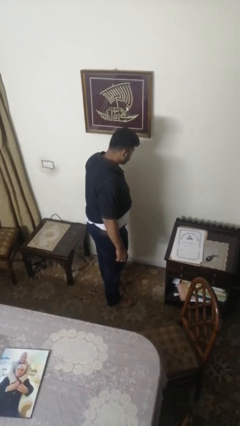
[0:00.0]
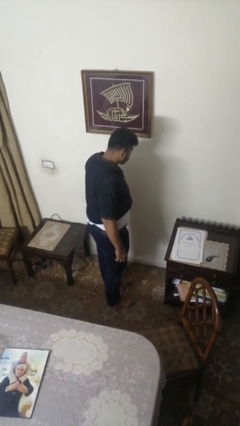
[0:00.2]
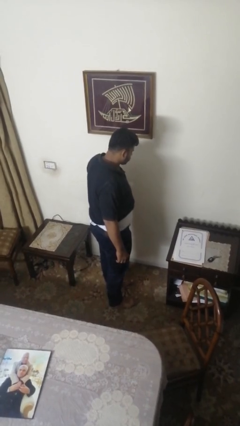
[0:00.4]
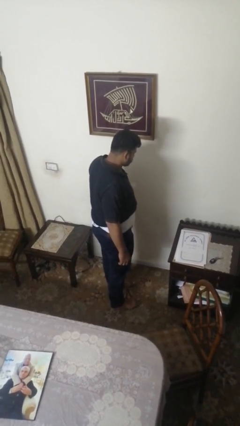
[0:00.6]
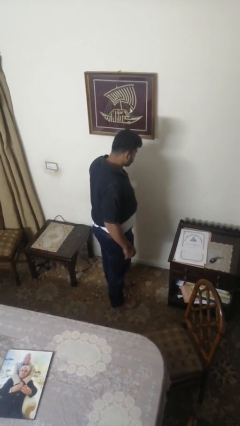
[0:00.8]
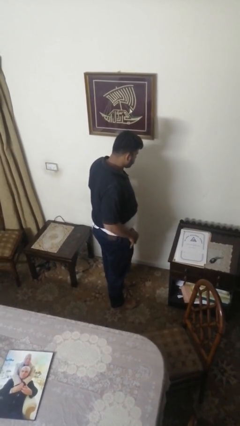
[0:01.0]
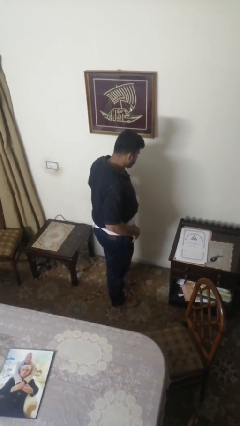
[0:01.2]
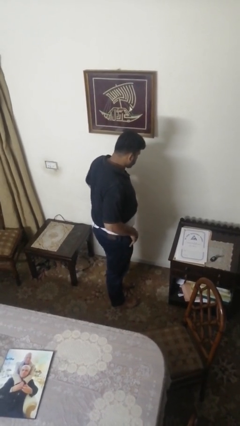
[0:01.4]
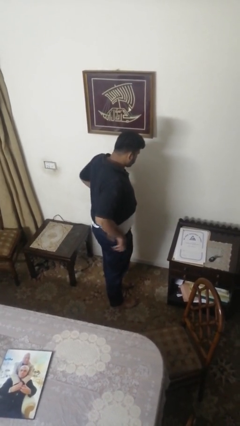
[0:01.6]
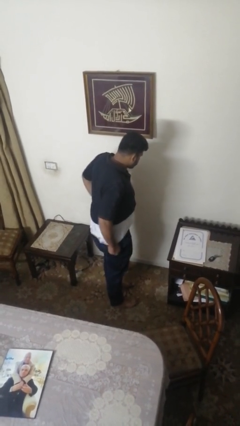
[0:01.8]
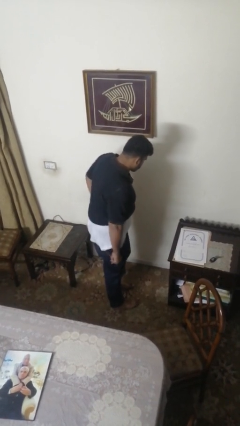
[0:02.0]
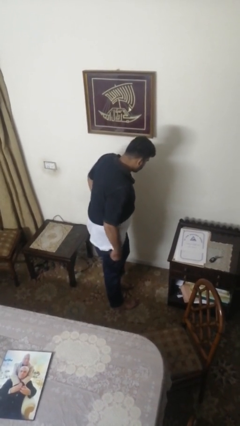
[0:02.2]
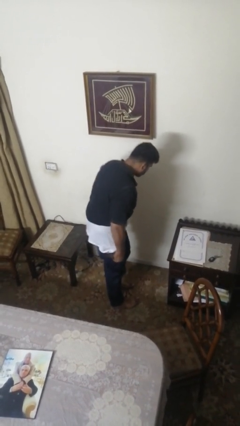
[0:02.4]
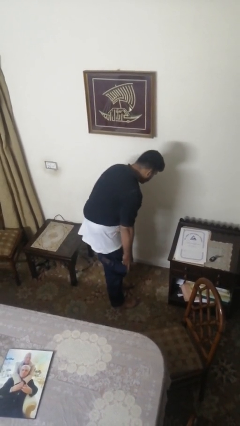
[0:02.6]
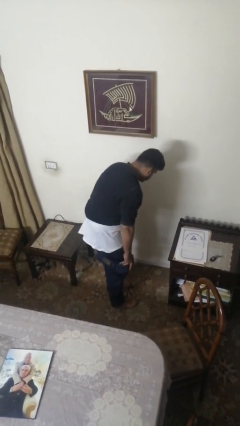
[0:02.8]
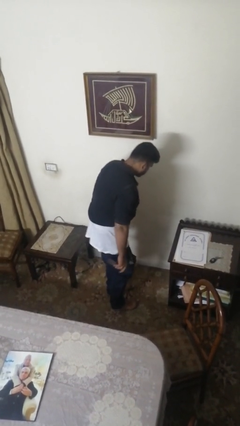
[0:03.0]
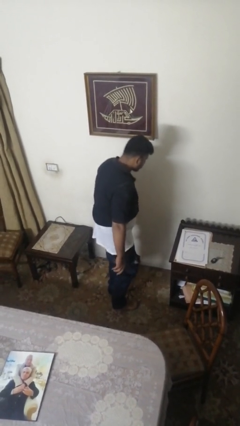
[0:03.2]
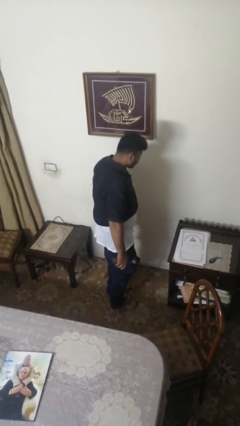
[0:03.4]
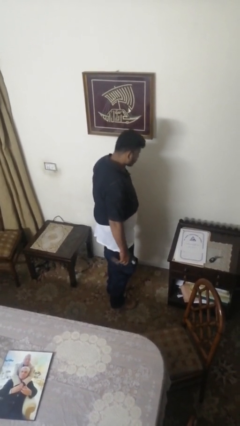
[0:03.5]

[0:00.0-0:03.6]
person takes off pants

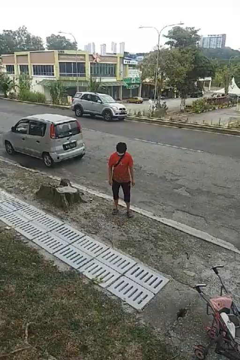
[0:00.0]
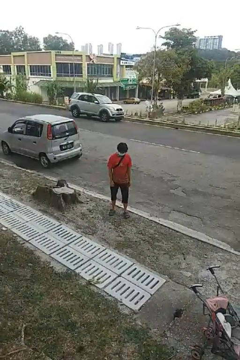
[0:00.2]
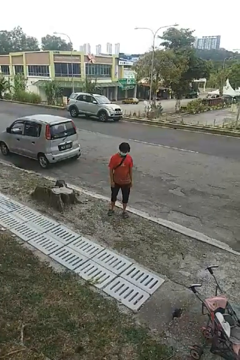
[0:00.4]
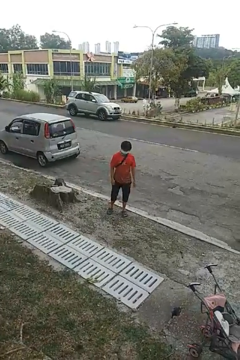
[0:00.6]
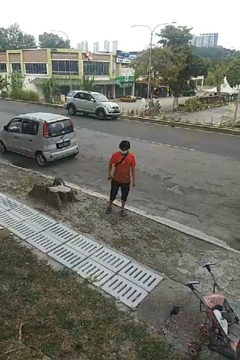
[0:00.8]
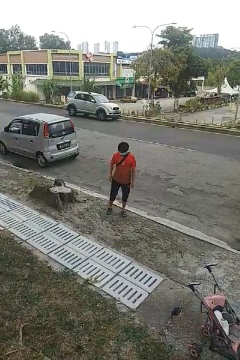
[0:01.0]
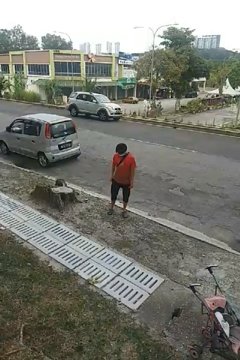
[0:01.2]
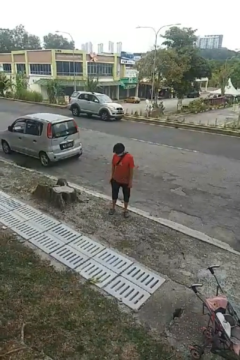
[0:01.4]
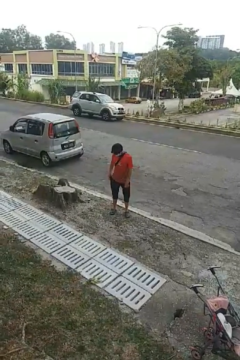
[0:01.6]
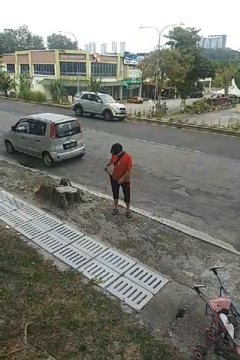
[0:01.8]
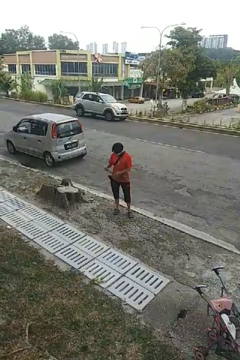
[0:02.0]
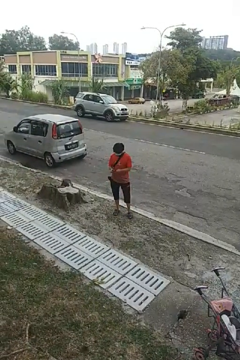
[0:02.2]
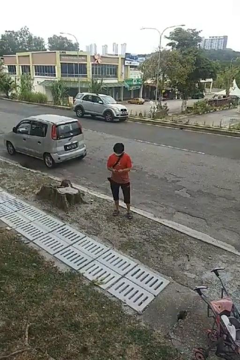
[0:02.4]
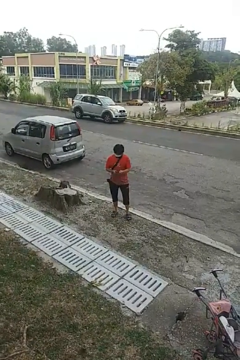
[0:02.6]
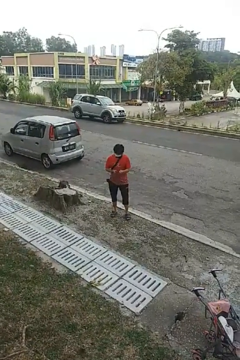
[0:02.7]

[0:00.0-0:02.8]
person takes phone from pocket

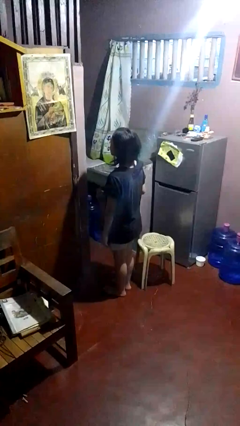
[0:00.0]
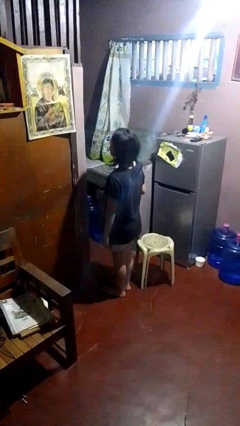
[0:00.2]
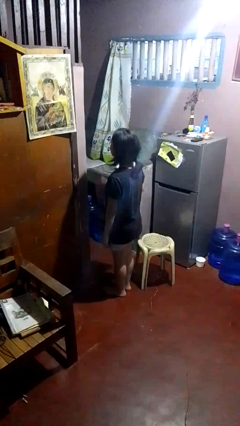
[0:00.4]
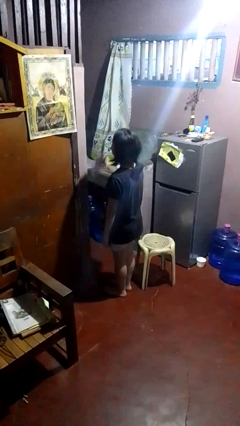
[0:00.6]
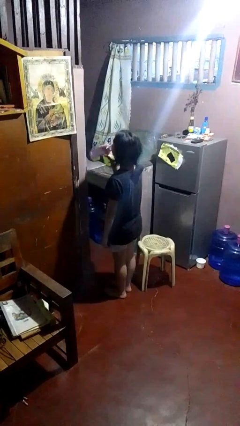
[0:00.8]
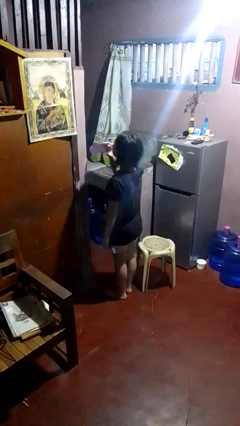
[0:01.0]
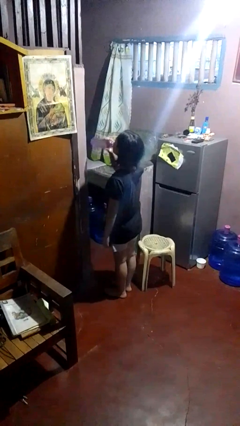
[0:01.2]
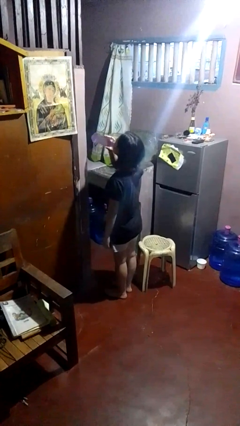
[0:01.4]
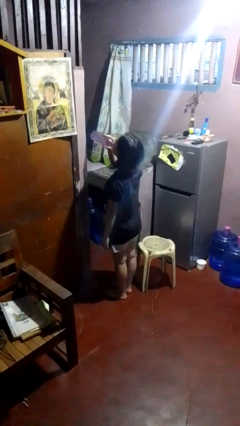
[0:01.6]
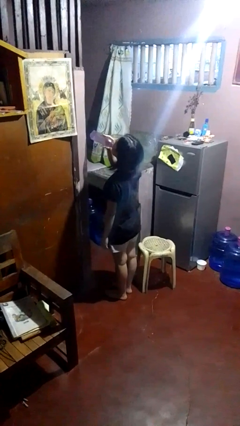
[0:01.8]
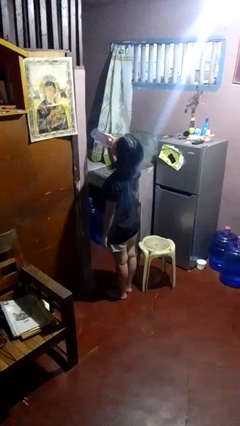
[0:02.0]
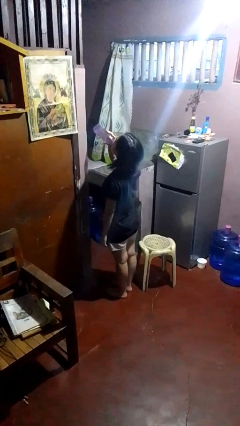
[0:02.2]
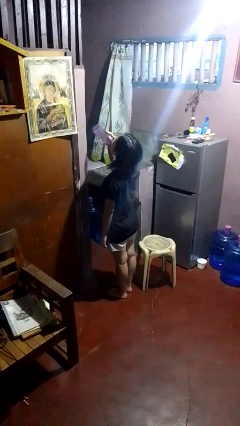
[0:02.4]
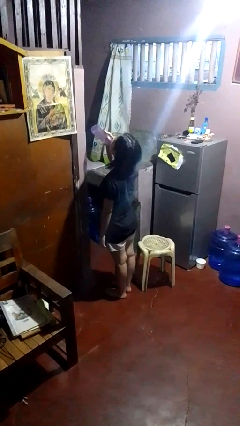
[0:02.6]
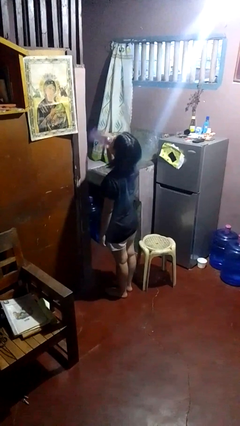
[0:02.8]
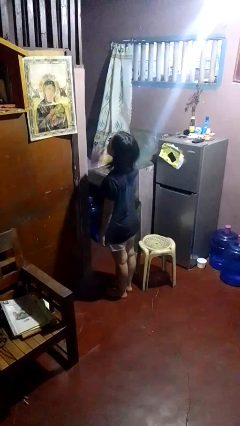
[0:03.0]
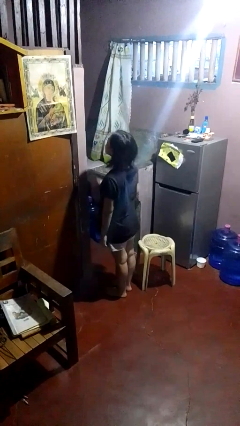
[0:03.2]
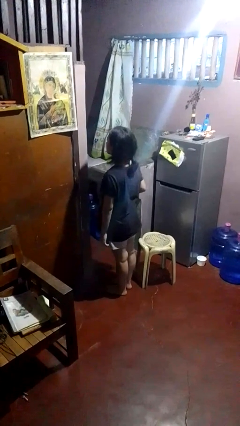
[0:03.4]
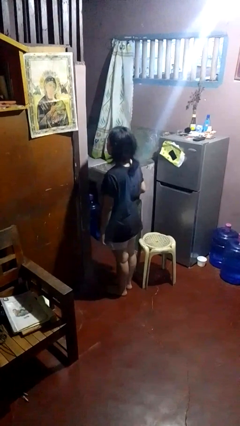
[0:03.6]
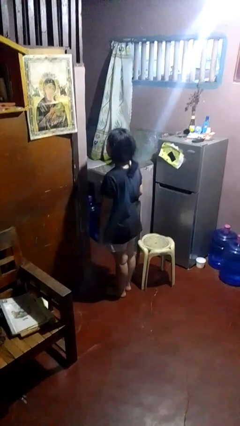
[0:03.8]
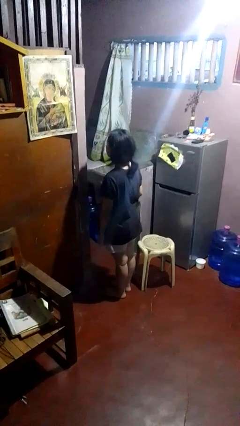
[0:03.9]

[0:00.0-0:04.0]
person drinks from bottle

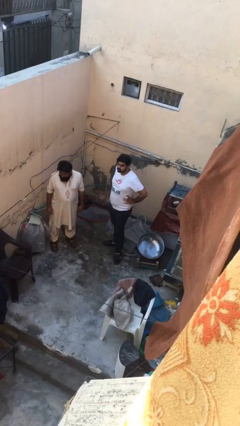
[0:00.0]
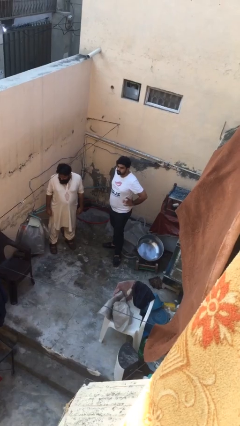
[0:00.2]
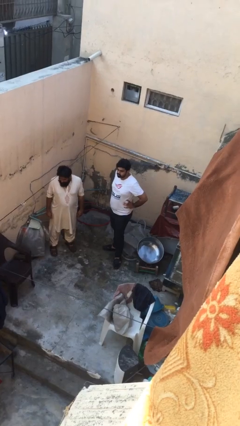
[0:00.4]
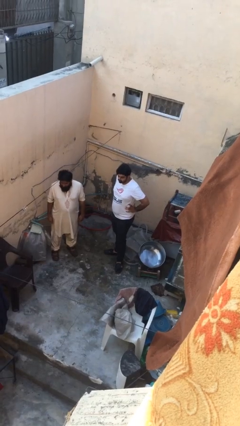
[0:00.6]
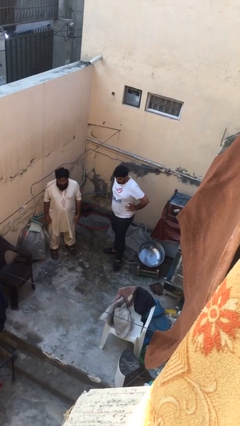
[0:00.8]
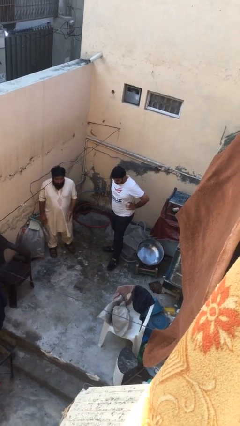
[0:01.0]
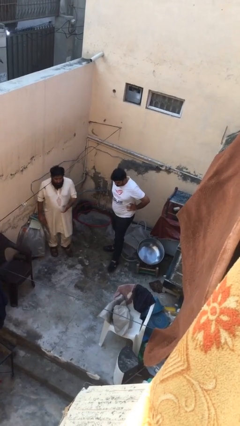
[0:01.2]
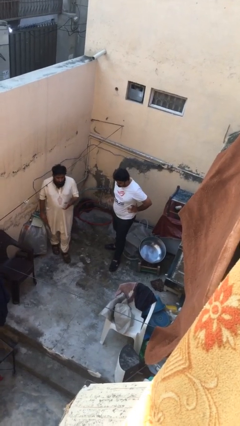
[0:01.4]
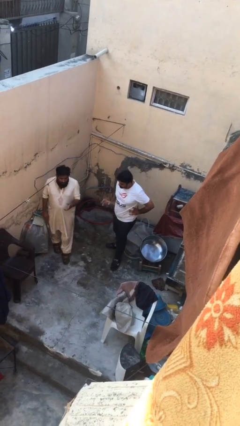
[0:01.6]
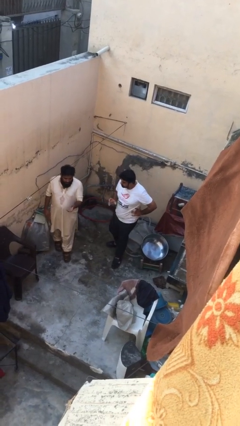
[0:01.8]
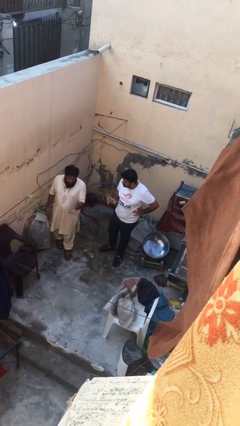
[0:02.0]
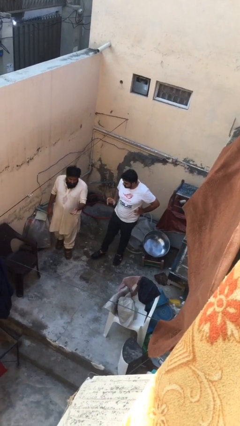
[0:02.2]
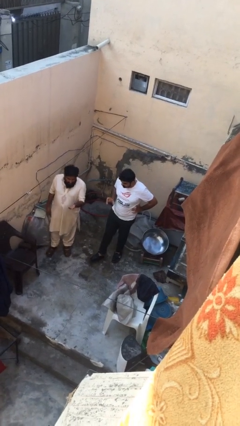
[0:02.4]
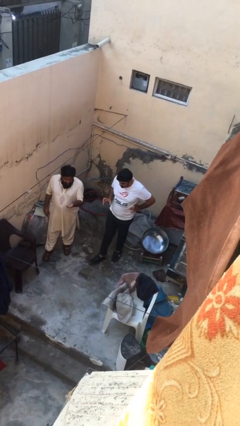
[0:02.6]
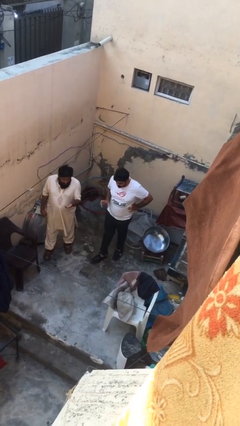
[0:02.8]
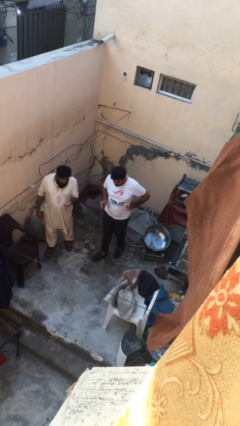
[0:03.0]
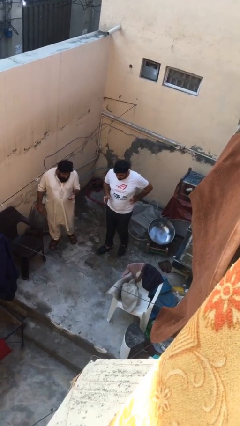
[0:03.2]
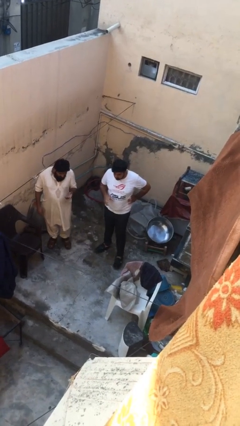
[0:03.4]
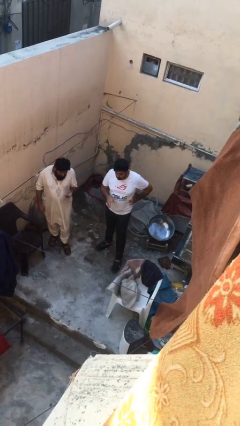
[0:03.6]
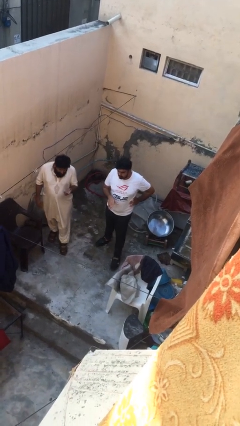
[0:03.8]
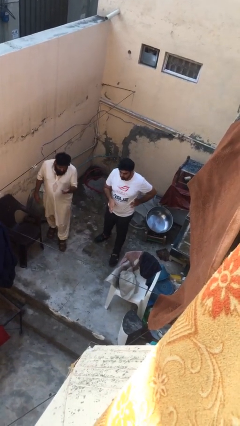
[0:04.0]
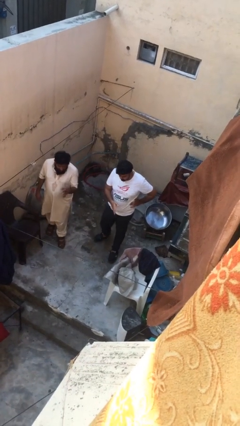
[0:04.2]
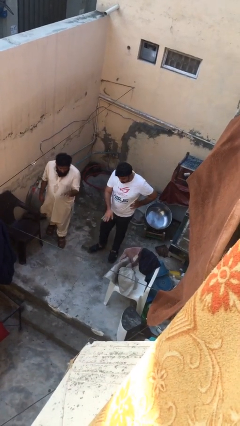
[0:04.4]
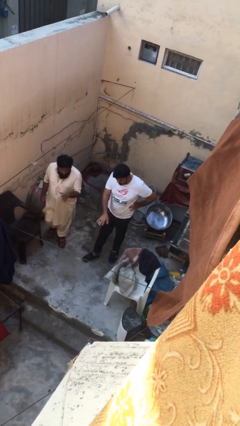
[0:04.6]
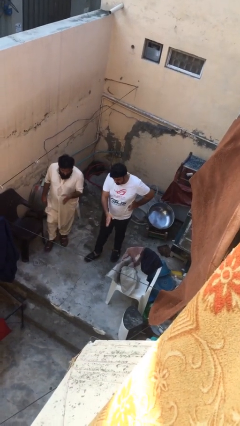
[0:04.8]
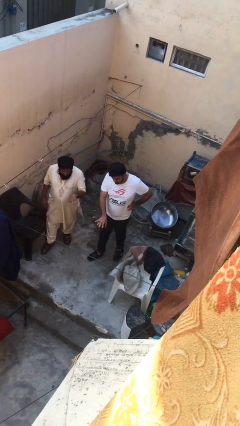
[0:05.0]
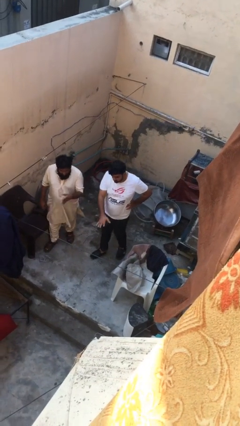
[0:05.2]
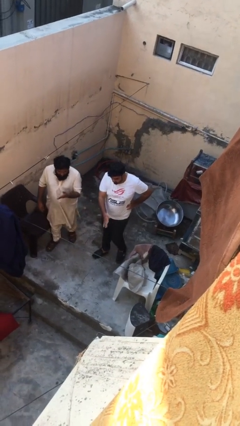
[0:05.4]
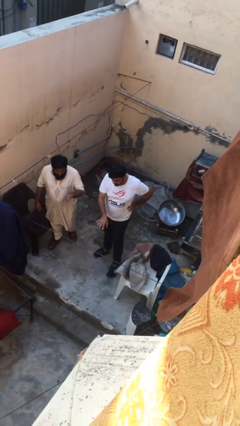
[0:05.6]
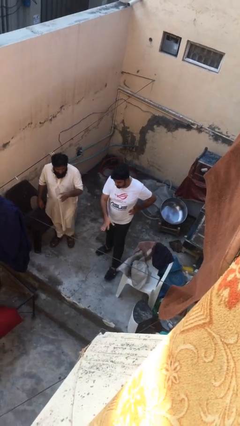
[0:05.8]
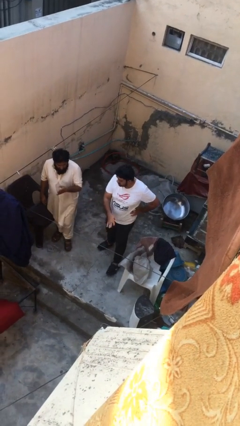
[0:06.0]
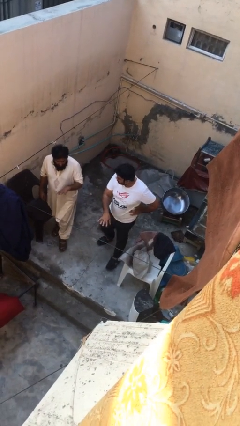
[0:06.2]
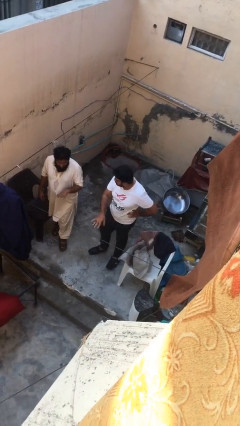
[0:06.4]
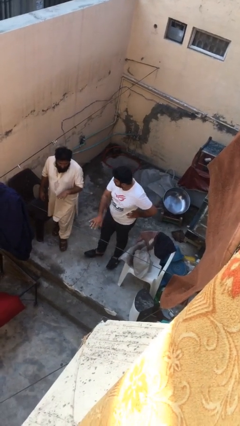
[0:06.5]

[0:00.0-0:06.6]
person talks to person

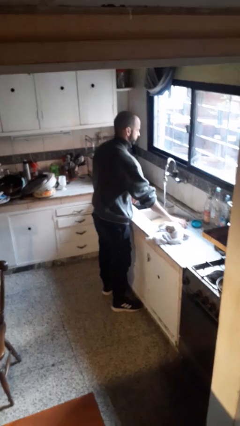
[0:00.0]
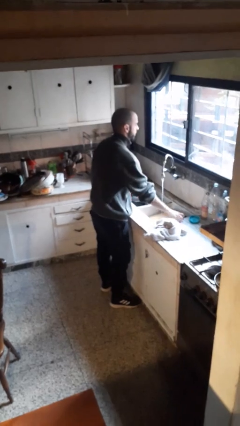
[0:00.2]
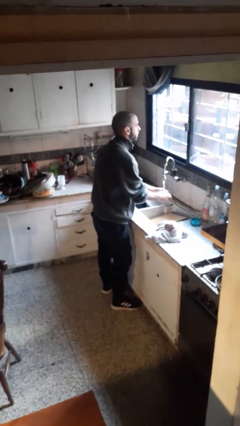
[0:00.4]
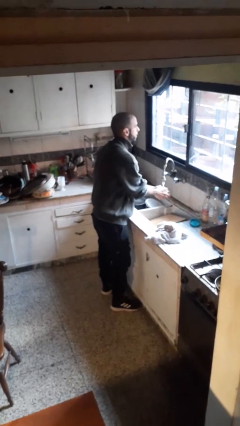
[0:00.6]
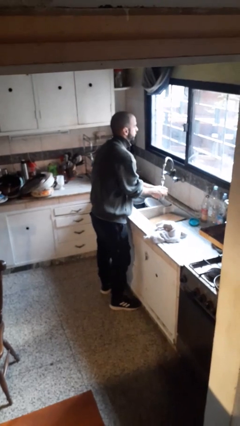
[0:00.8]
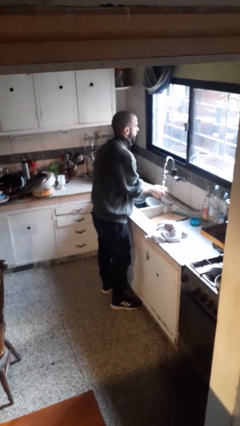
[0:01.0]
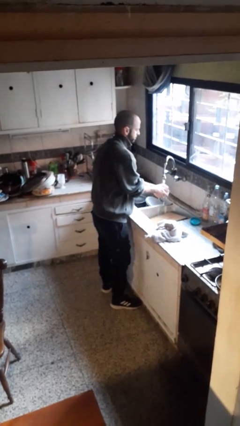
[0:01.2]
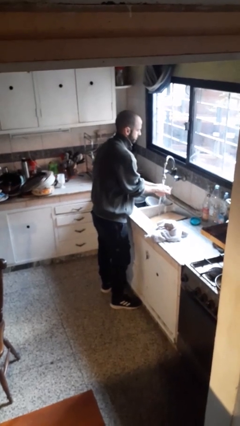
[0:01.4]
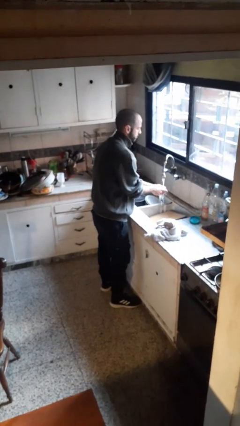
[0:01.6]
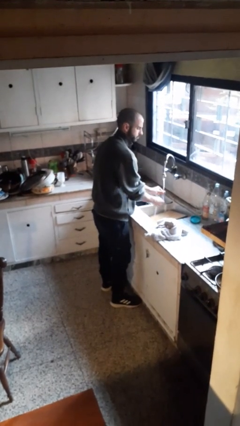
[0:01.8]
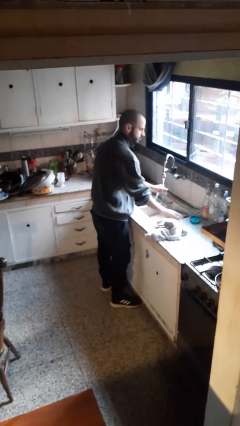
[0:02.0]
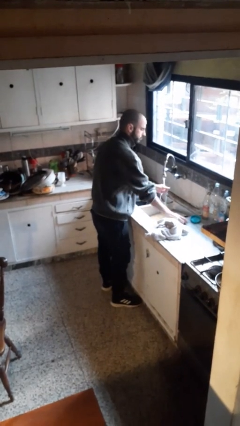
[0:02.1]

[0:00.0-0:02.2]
person washes hands
